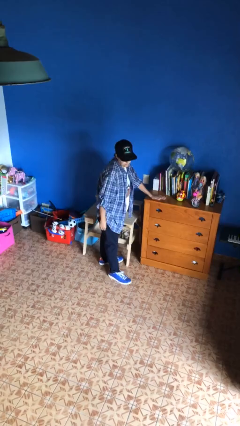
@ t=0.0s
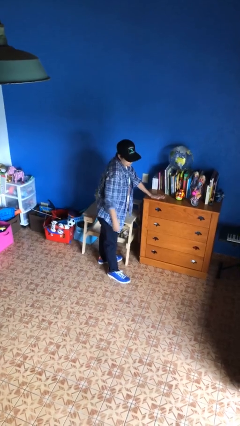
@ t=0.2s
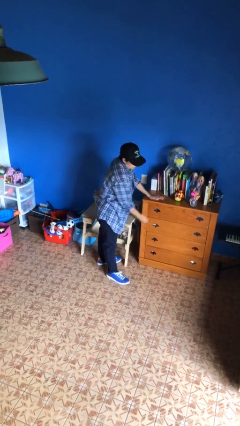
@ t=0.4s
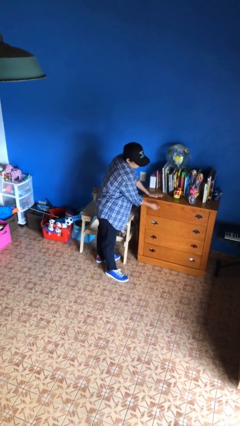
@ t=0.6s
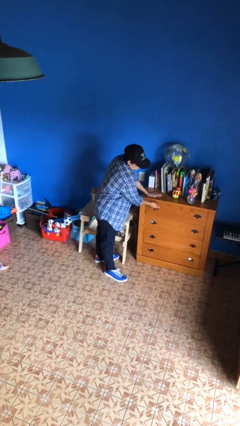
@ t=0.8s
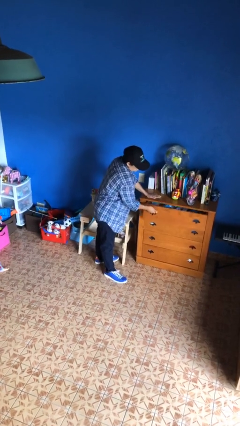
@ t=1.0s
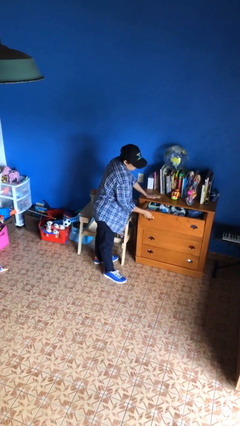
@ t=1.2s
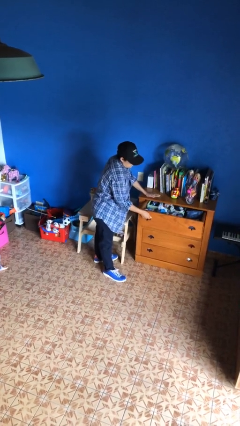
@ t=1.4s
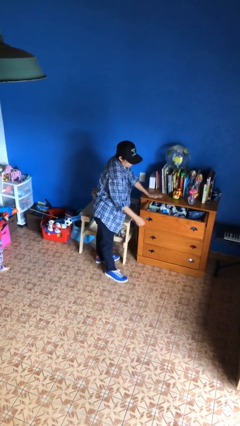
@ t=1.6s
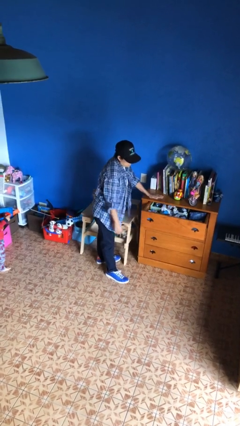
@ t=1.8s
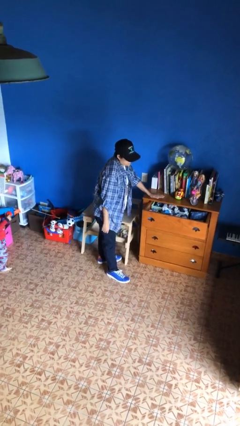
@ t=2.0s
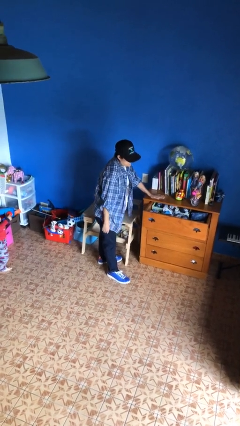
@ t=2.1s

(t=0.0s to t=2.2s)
person opens dresser drawer

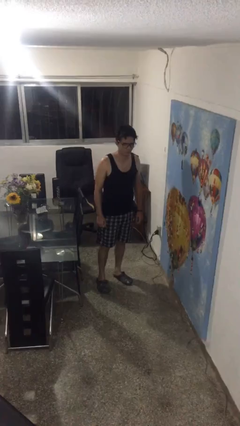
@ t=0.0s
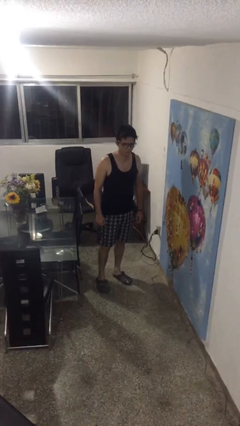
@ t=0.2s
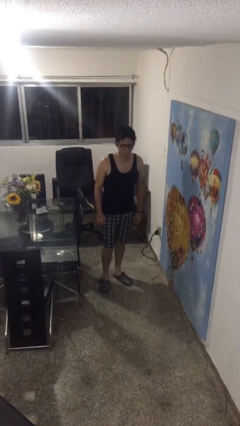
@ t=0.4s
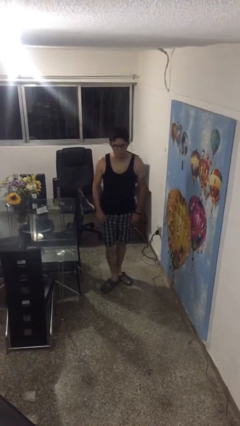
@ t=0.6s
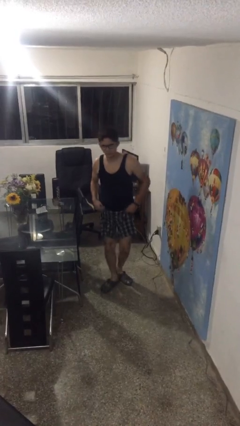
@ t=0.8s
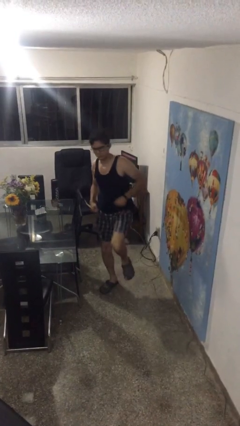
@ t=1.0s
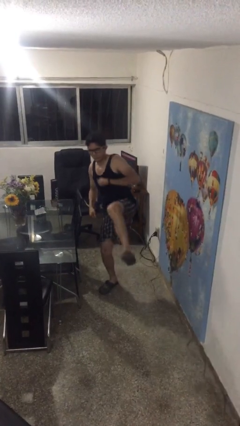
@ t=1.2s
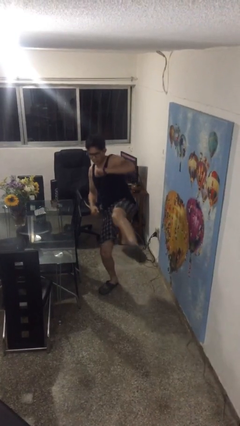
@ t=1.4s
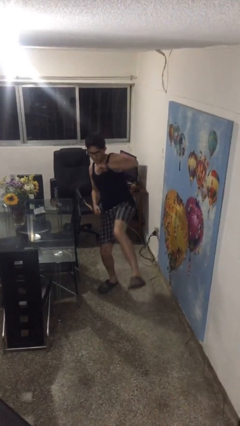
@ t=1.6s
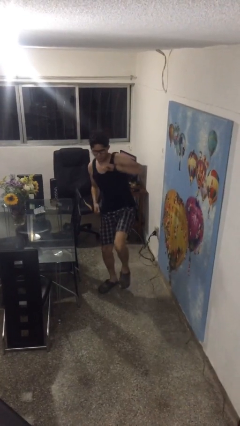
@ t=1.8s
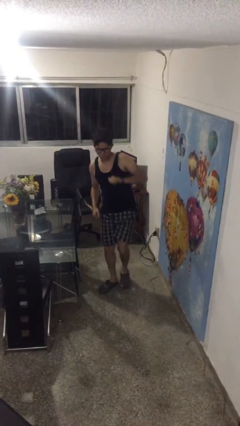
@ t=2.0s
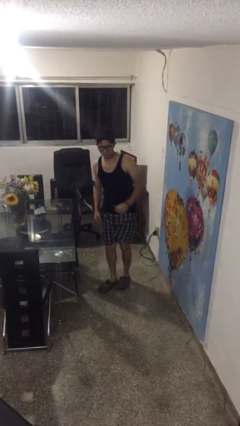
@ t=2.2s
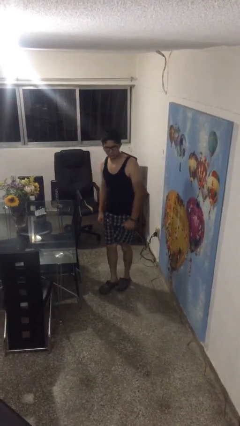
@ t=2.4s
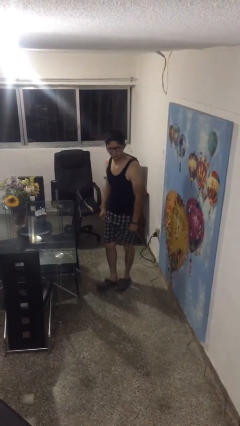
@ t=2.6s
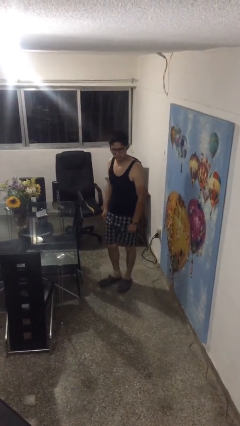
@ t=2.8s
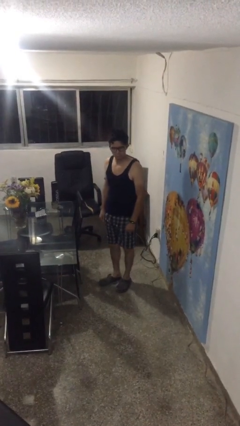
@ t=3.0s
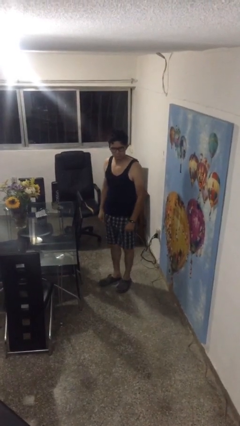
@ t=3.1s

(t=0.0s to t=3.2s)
person karate kicks

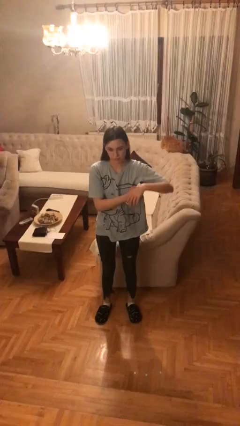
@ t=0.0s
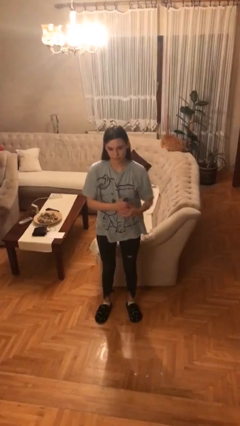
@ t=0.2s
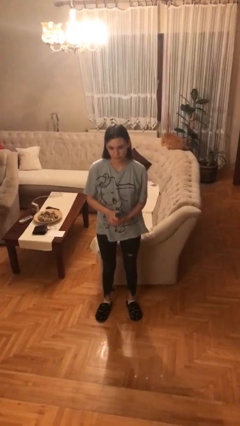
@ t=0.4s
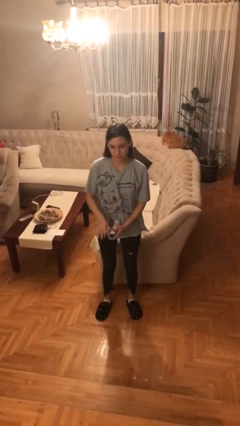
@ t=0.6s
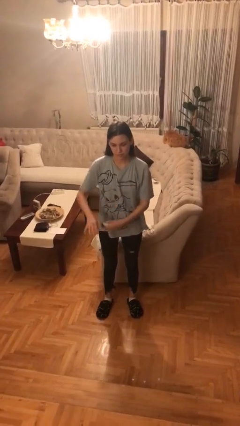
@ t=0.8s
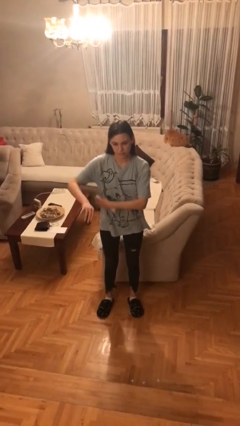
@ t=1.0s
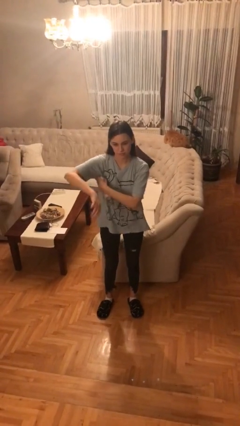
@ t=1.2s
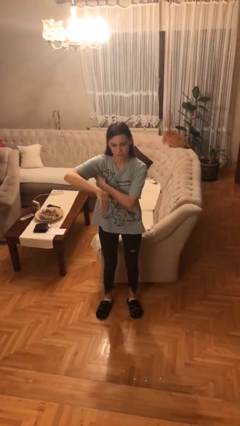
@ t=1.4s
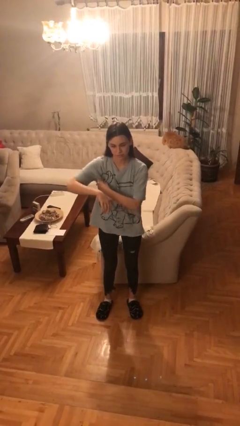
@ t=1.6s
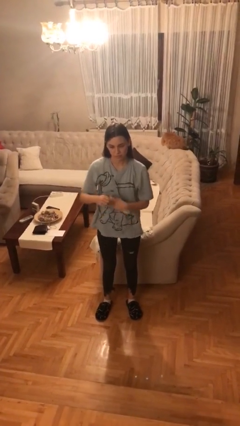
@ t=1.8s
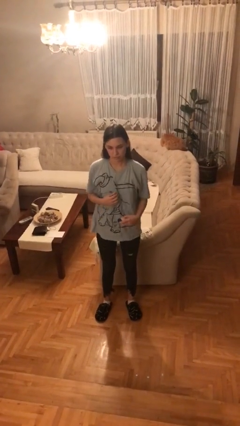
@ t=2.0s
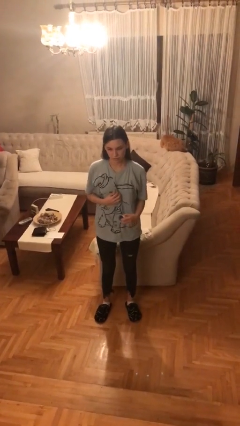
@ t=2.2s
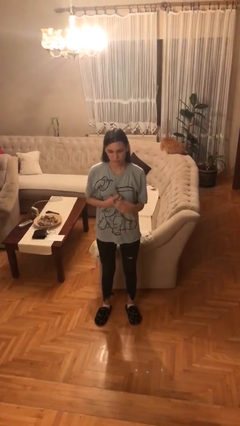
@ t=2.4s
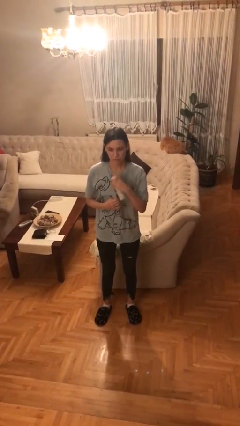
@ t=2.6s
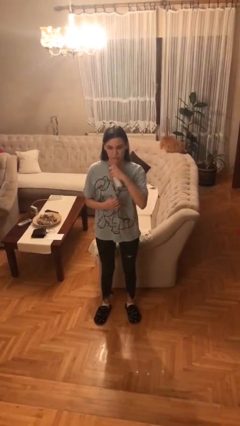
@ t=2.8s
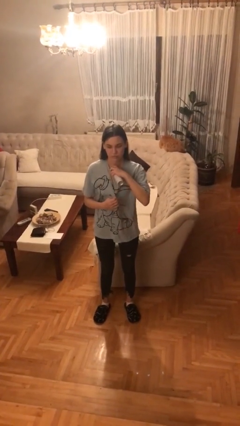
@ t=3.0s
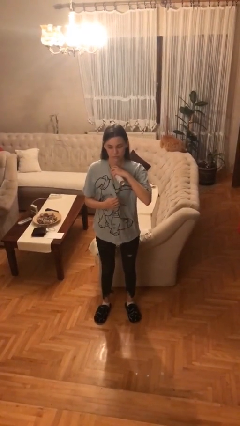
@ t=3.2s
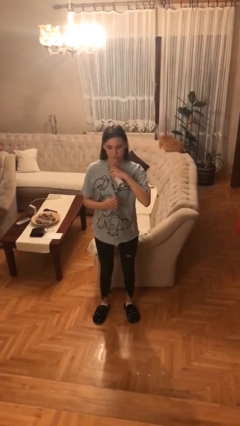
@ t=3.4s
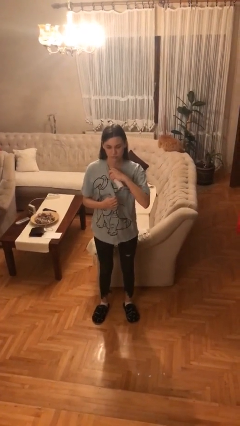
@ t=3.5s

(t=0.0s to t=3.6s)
person applies deodorant

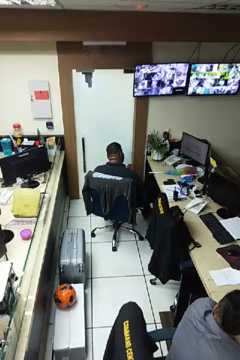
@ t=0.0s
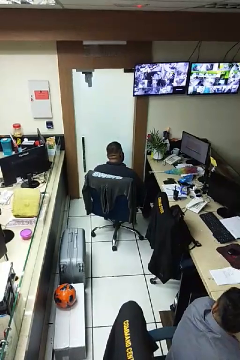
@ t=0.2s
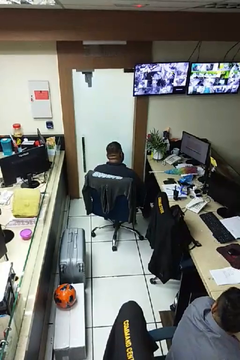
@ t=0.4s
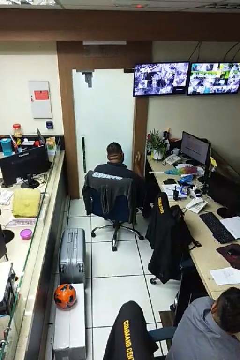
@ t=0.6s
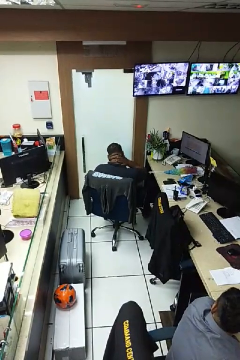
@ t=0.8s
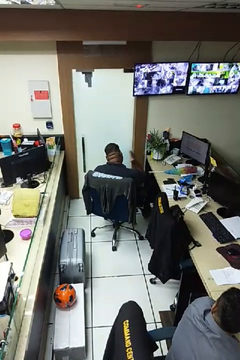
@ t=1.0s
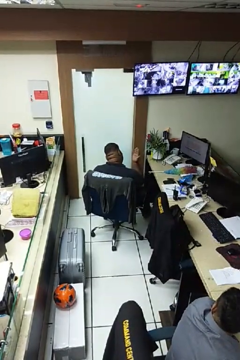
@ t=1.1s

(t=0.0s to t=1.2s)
person swats bug

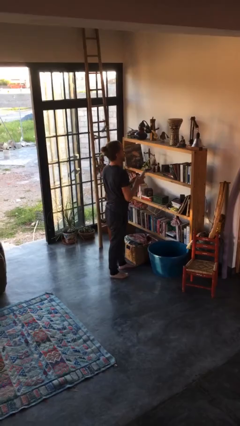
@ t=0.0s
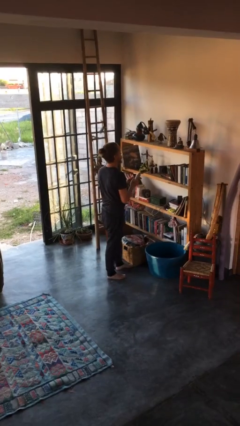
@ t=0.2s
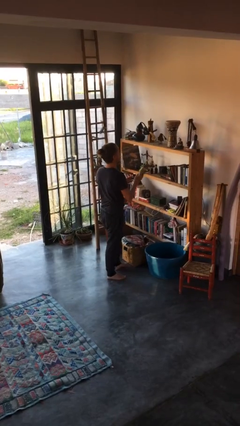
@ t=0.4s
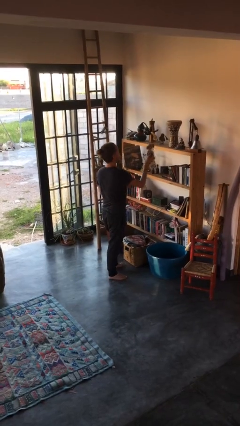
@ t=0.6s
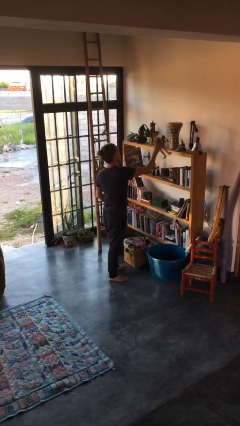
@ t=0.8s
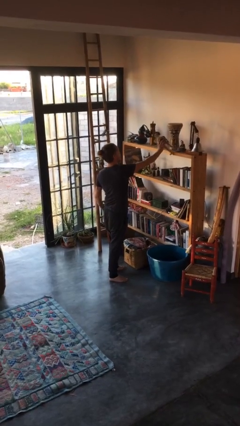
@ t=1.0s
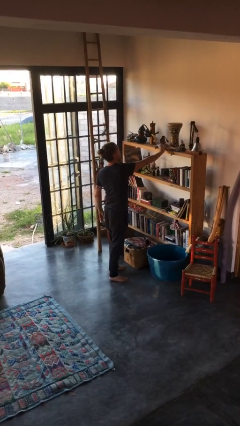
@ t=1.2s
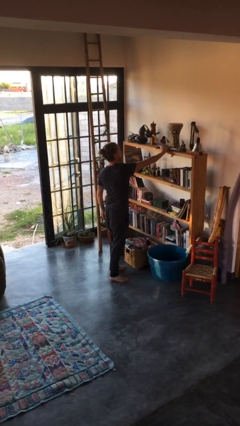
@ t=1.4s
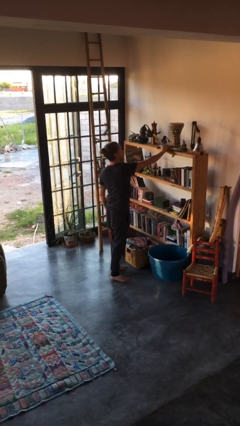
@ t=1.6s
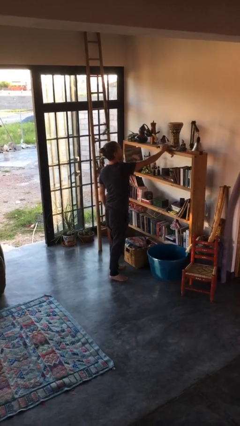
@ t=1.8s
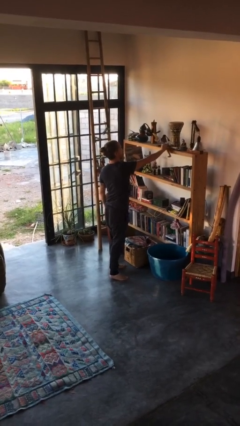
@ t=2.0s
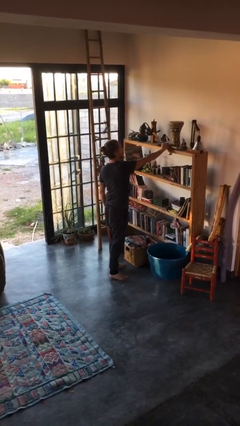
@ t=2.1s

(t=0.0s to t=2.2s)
person puts down object on countertop

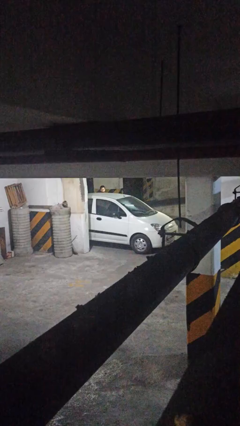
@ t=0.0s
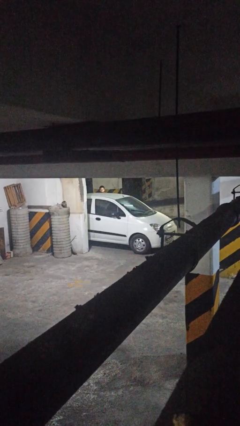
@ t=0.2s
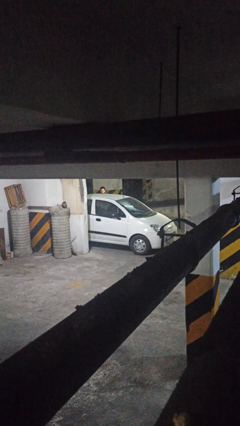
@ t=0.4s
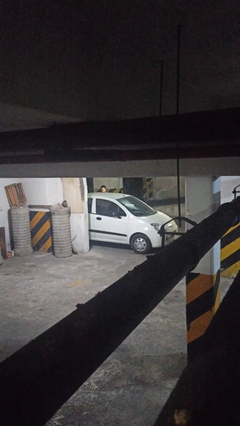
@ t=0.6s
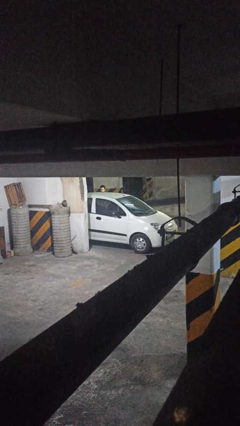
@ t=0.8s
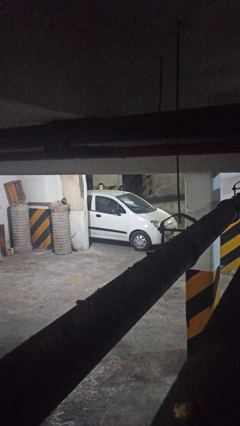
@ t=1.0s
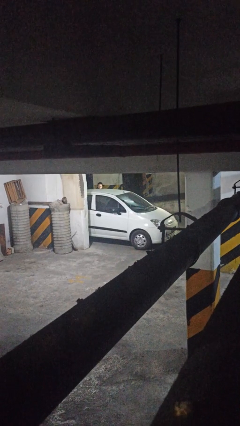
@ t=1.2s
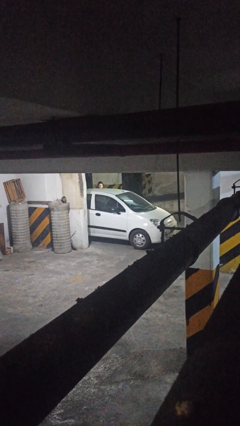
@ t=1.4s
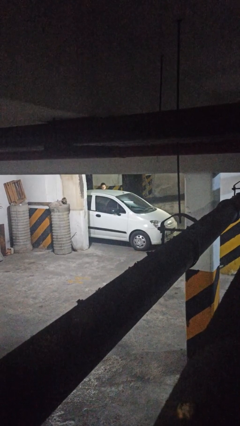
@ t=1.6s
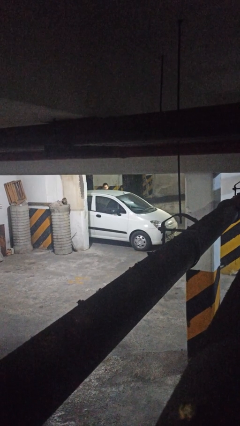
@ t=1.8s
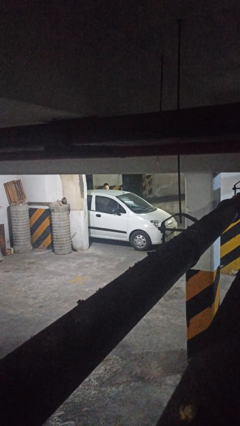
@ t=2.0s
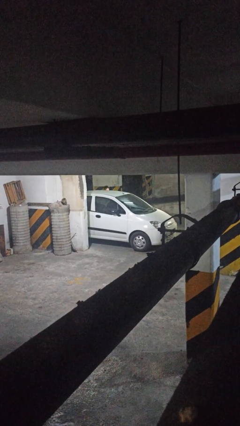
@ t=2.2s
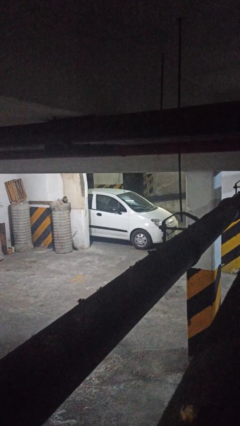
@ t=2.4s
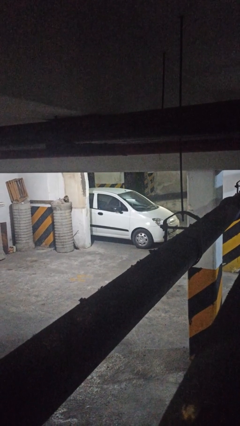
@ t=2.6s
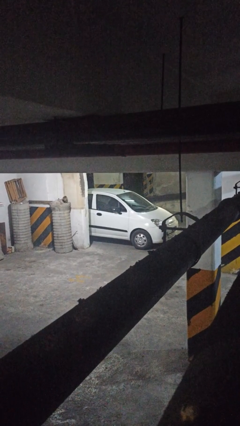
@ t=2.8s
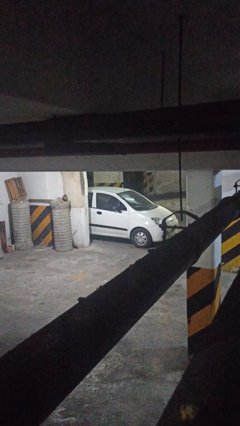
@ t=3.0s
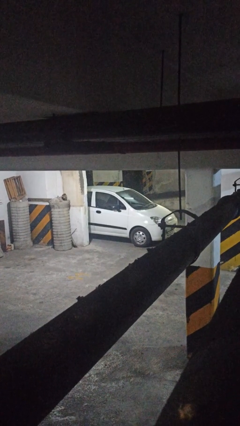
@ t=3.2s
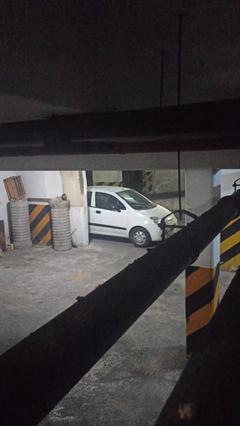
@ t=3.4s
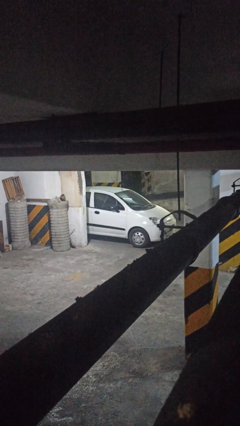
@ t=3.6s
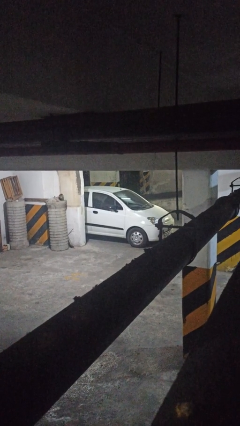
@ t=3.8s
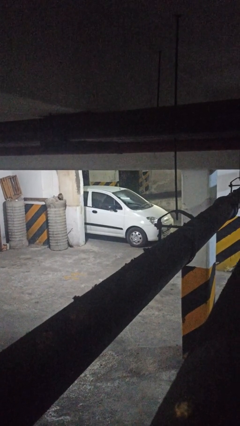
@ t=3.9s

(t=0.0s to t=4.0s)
car picks up person

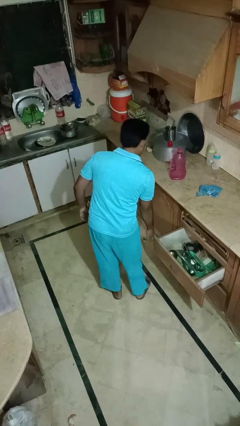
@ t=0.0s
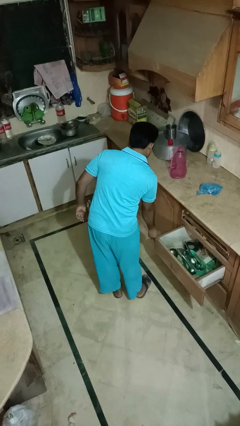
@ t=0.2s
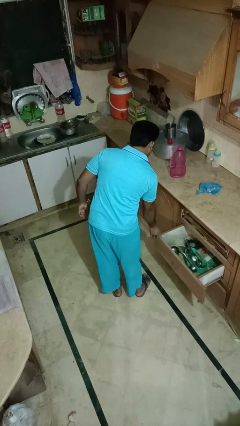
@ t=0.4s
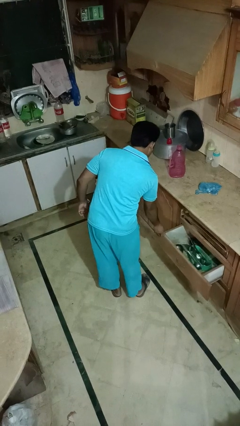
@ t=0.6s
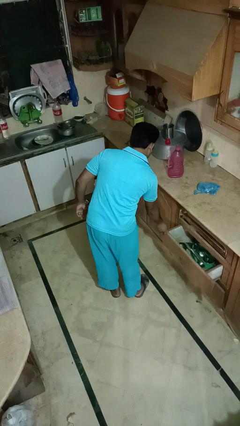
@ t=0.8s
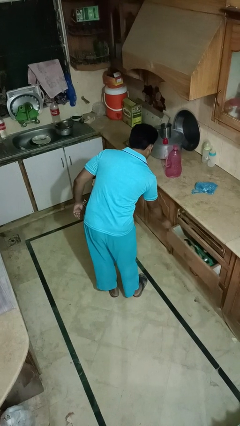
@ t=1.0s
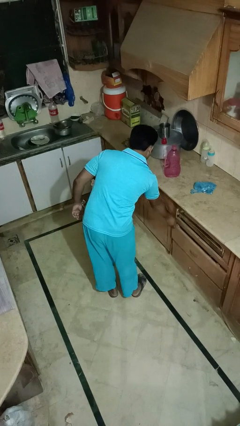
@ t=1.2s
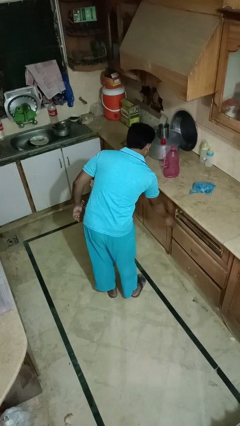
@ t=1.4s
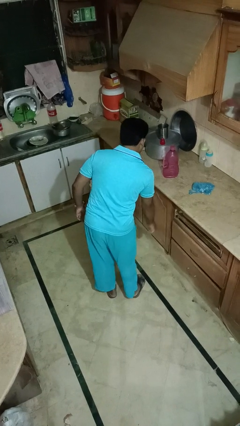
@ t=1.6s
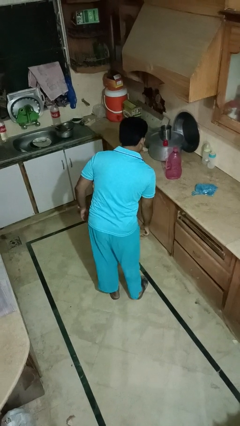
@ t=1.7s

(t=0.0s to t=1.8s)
person closes kitchen drawer
